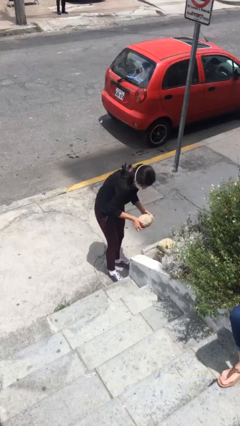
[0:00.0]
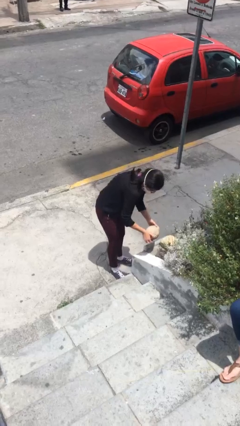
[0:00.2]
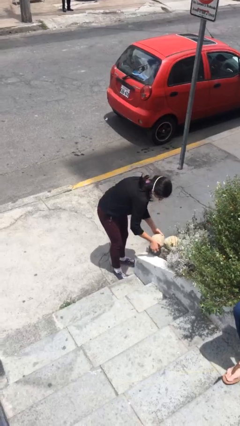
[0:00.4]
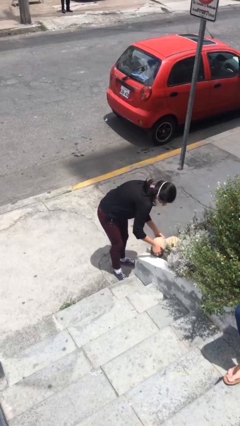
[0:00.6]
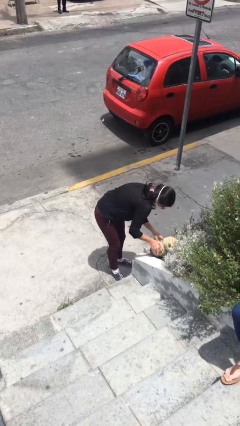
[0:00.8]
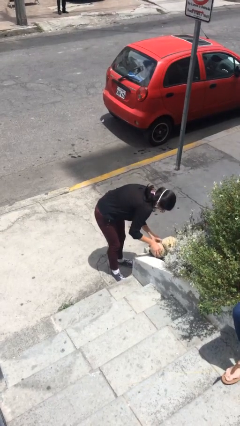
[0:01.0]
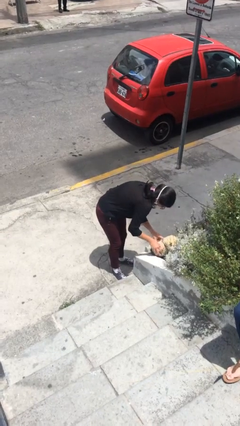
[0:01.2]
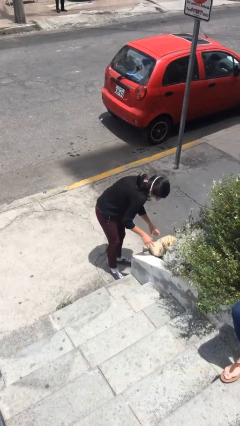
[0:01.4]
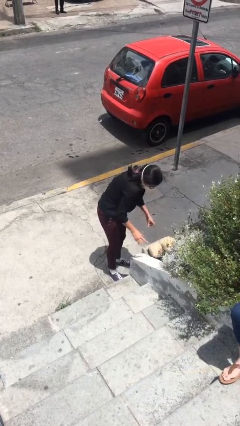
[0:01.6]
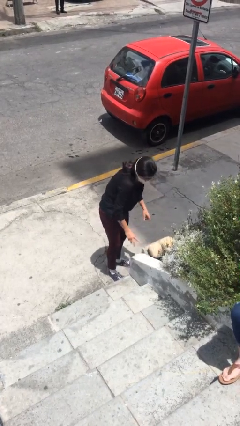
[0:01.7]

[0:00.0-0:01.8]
person puts down object on floor

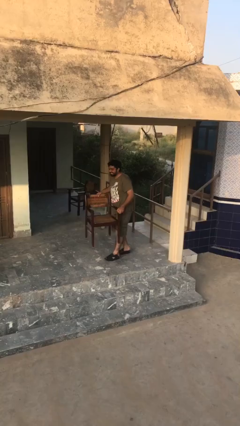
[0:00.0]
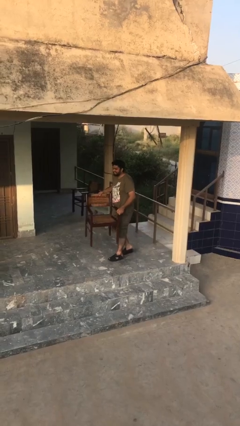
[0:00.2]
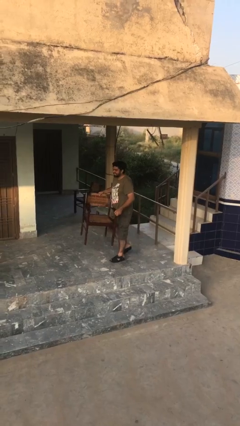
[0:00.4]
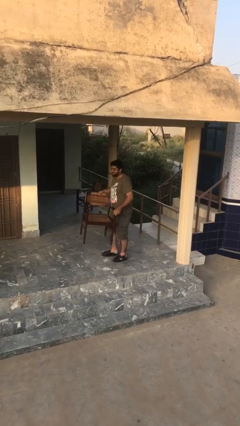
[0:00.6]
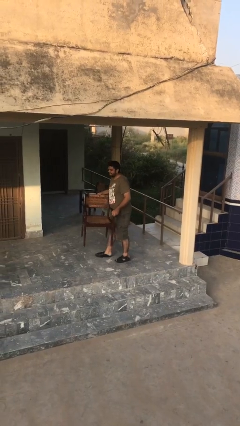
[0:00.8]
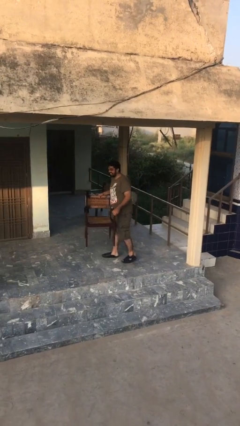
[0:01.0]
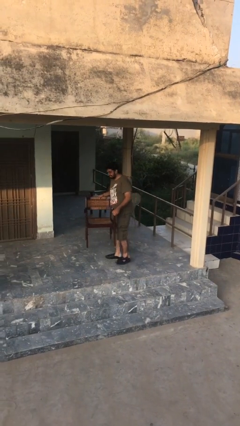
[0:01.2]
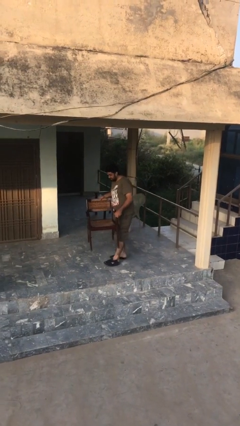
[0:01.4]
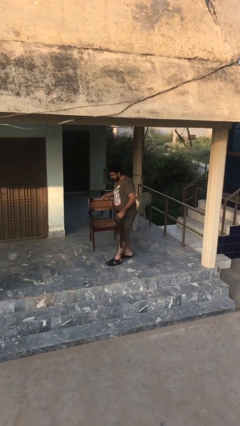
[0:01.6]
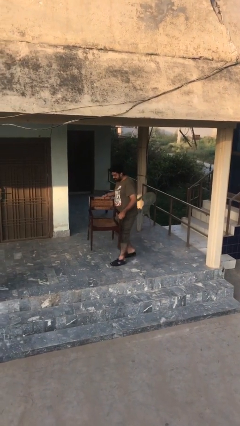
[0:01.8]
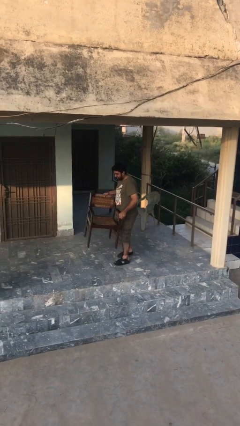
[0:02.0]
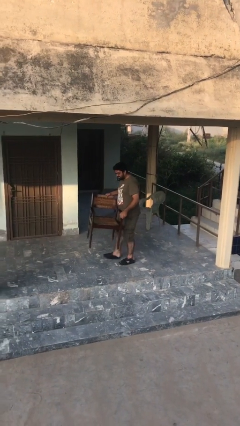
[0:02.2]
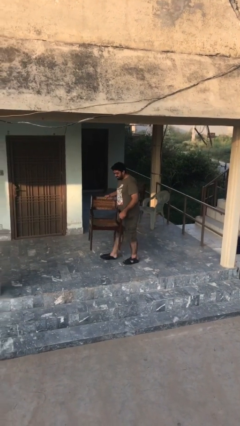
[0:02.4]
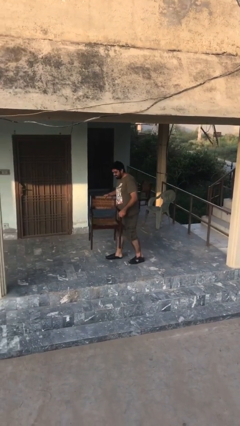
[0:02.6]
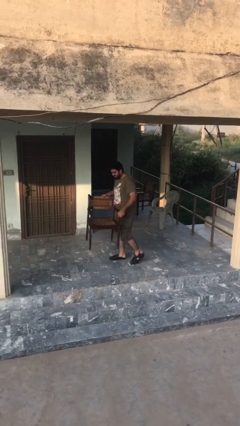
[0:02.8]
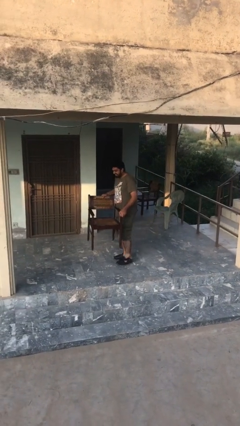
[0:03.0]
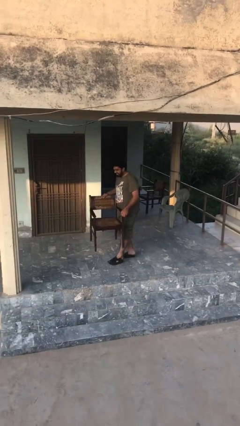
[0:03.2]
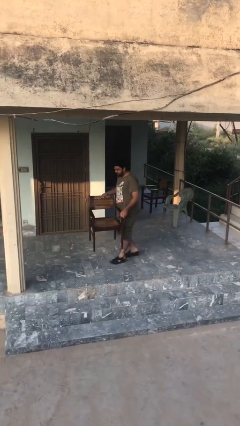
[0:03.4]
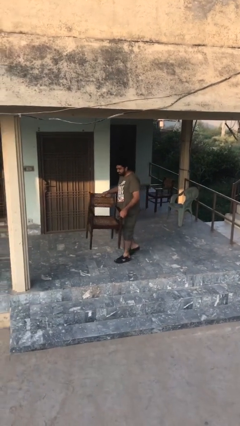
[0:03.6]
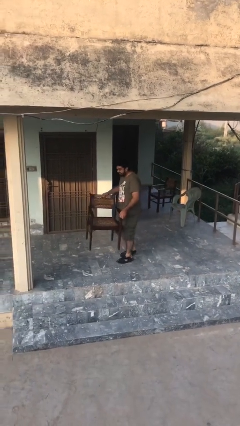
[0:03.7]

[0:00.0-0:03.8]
person carries heavy object

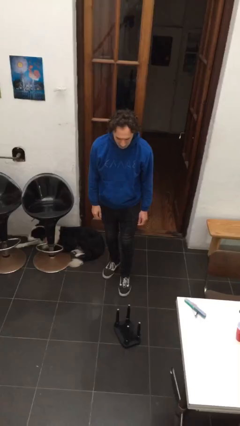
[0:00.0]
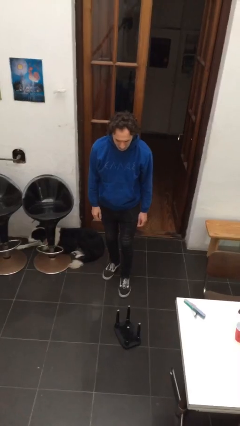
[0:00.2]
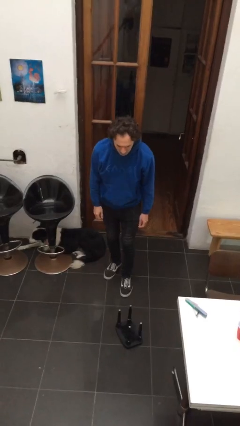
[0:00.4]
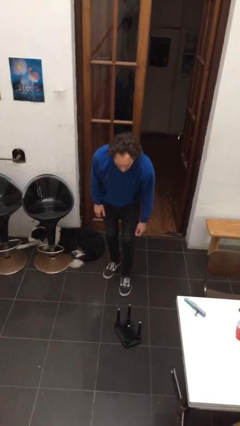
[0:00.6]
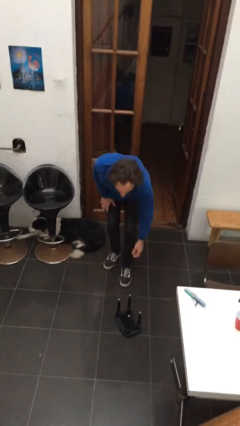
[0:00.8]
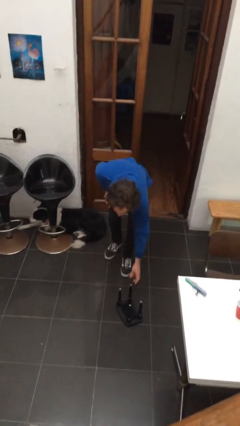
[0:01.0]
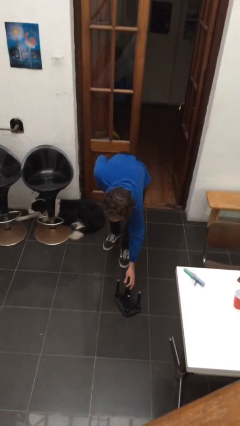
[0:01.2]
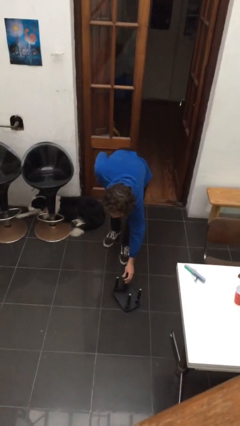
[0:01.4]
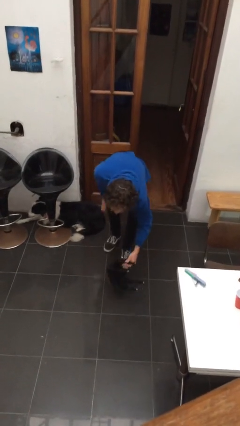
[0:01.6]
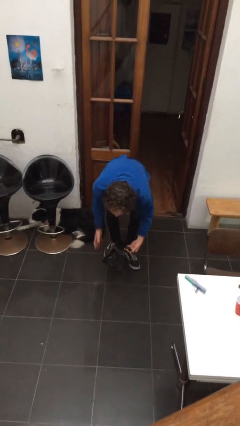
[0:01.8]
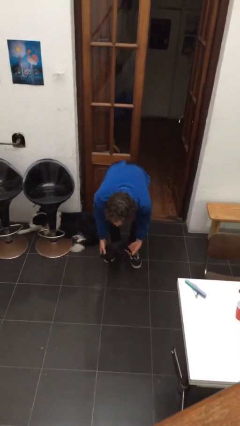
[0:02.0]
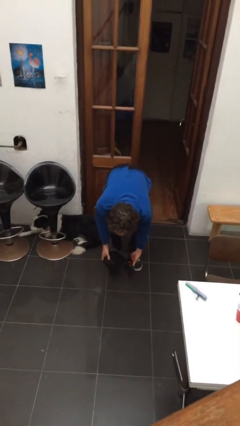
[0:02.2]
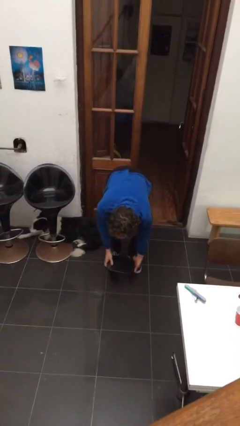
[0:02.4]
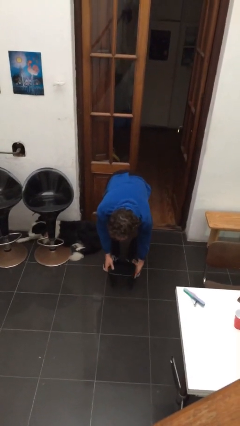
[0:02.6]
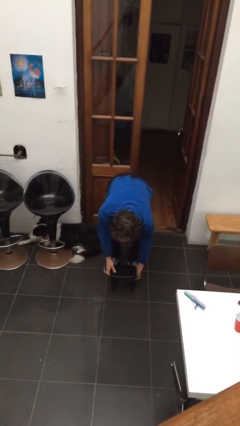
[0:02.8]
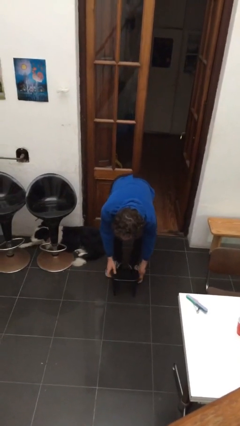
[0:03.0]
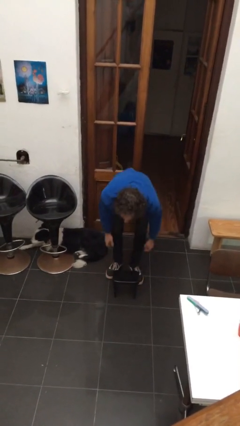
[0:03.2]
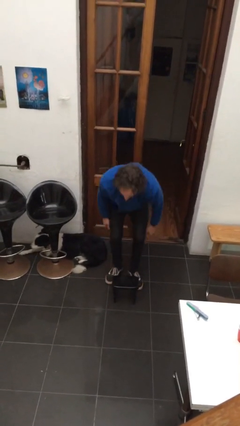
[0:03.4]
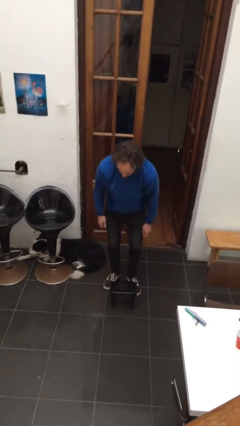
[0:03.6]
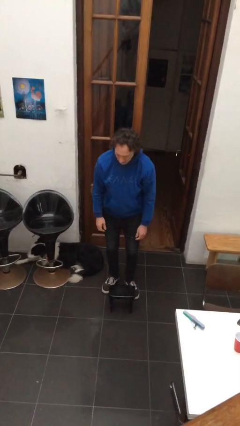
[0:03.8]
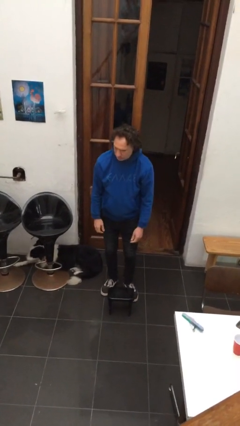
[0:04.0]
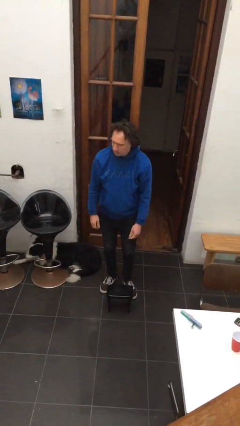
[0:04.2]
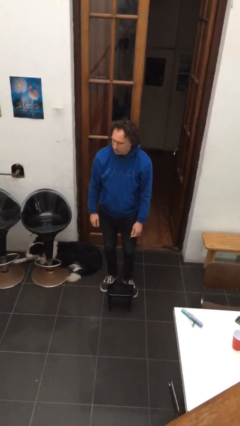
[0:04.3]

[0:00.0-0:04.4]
person sets upright furniture

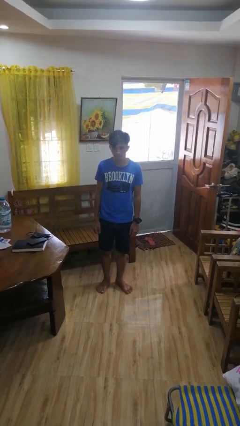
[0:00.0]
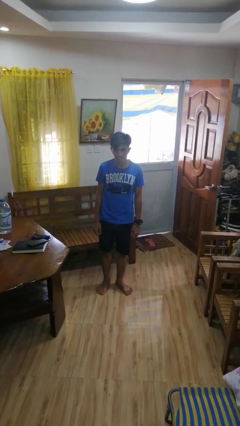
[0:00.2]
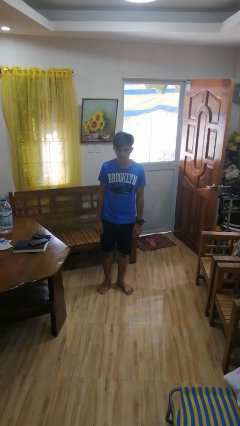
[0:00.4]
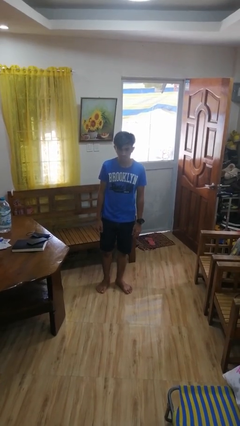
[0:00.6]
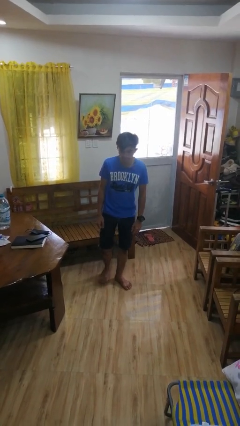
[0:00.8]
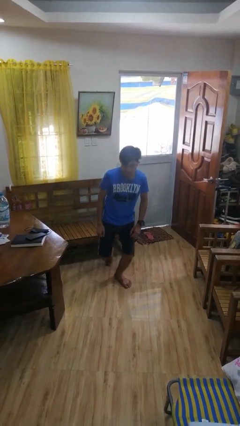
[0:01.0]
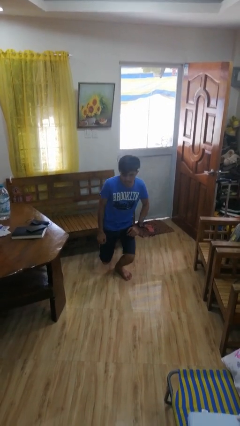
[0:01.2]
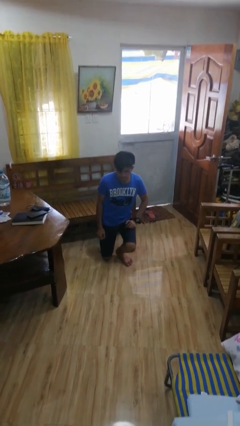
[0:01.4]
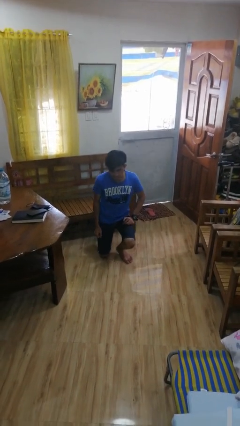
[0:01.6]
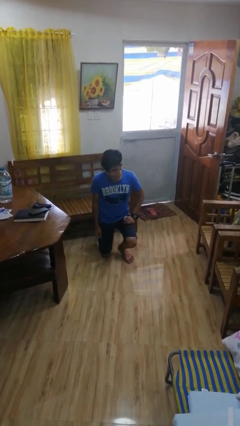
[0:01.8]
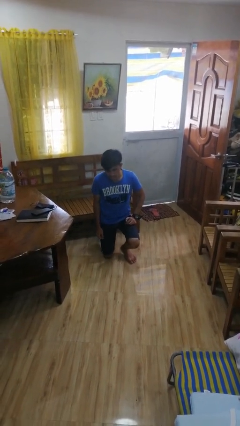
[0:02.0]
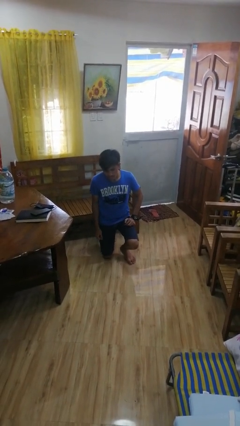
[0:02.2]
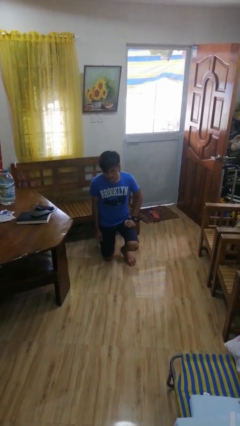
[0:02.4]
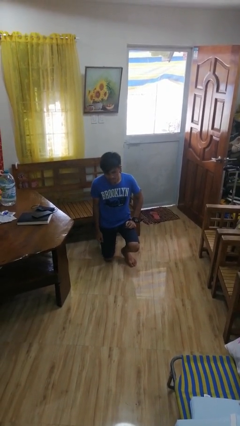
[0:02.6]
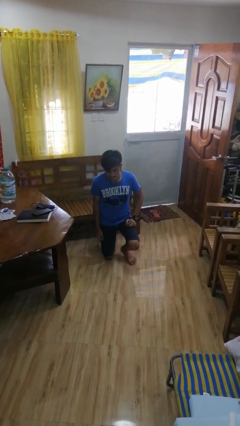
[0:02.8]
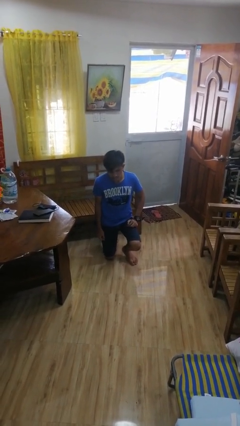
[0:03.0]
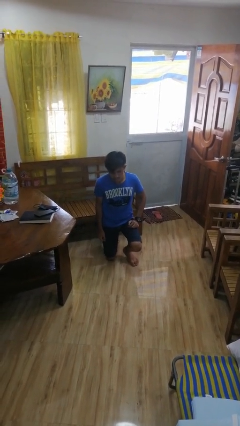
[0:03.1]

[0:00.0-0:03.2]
person kneels

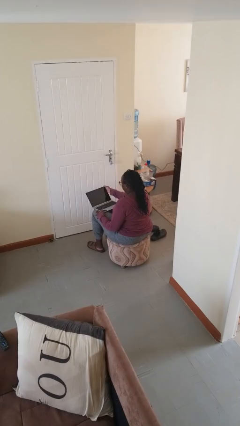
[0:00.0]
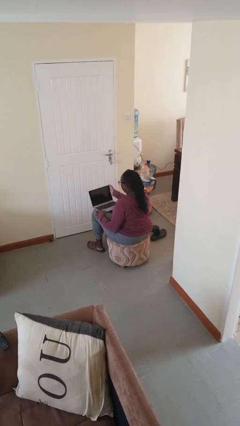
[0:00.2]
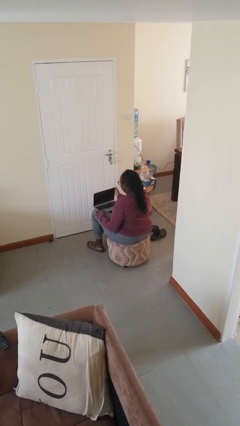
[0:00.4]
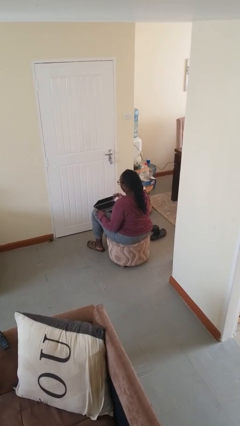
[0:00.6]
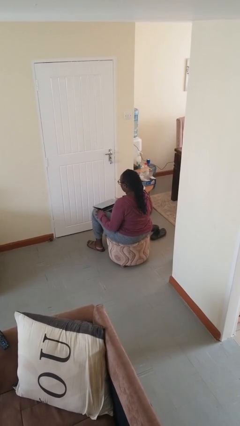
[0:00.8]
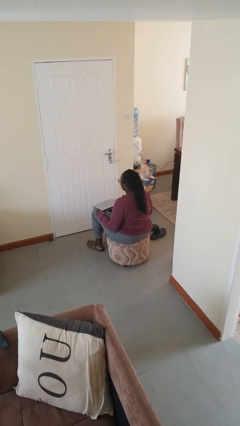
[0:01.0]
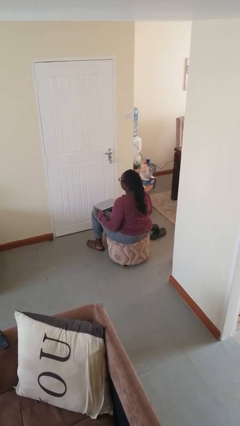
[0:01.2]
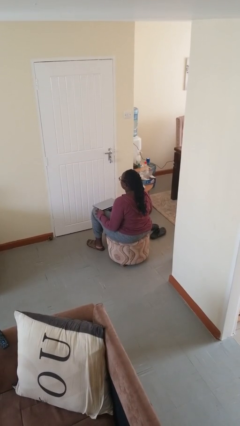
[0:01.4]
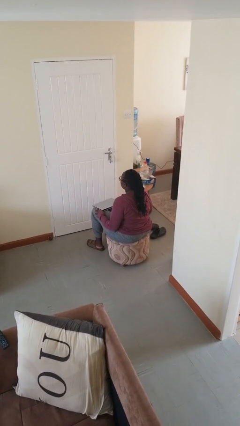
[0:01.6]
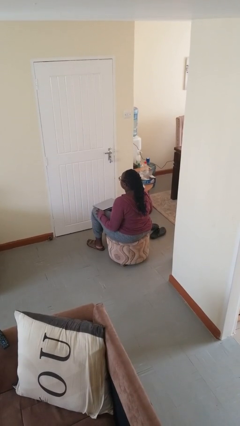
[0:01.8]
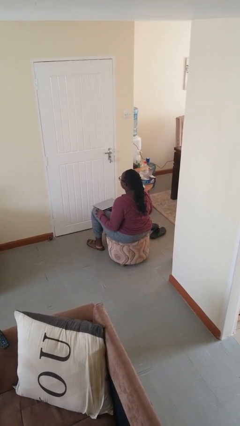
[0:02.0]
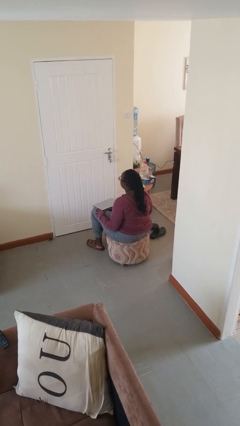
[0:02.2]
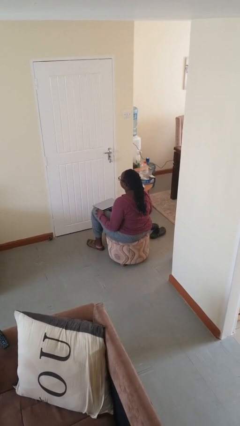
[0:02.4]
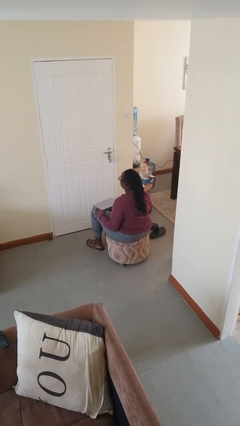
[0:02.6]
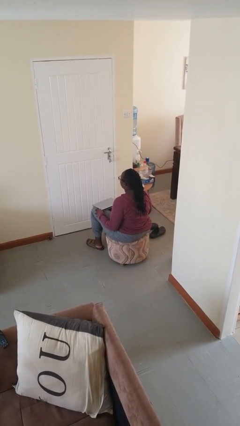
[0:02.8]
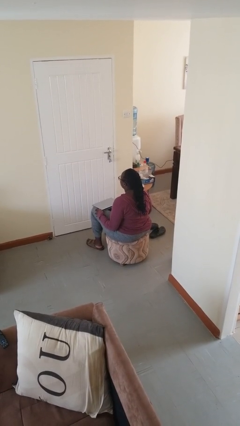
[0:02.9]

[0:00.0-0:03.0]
person closes laptop

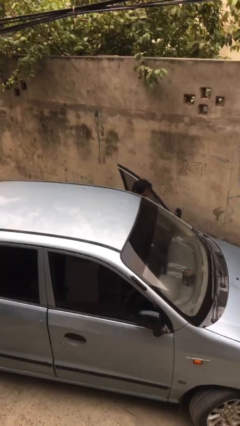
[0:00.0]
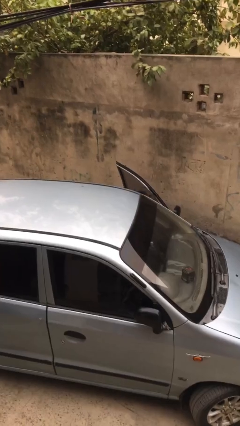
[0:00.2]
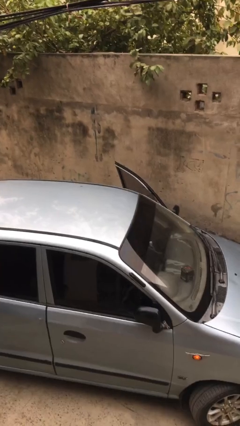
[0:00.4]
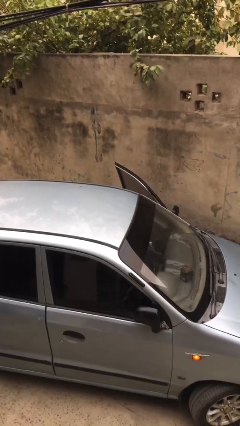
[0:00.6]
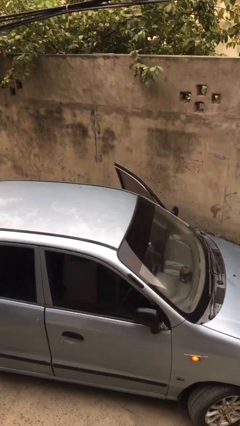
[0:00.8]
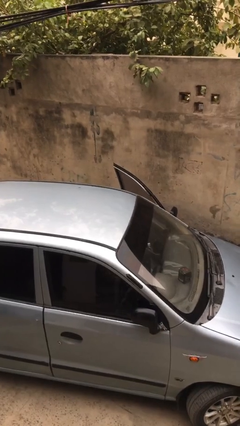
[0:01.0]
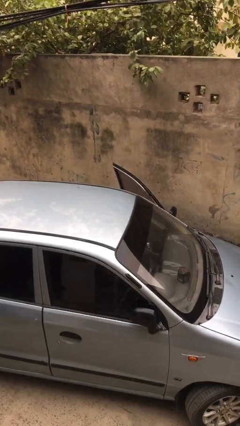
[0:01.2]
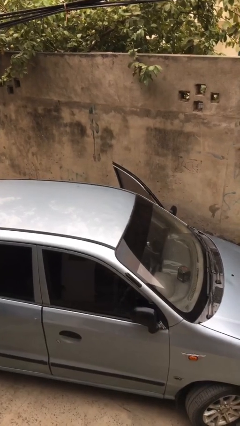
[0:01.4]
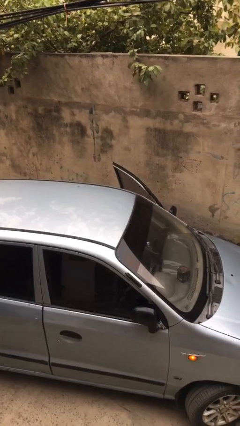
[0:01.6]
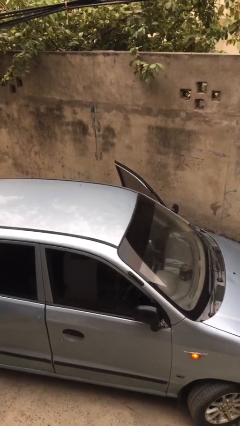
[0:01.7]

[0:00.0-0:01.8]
person enters car
